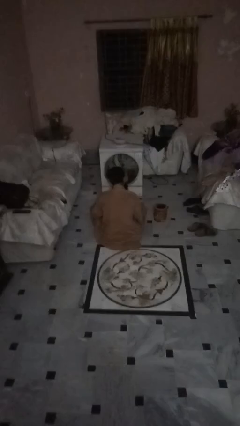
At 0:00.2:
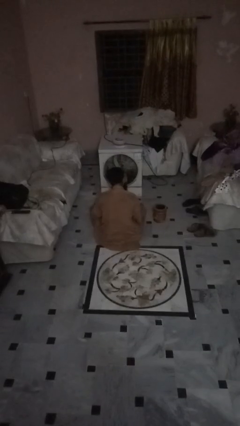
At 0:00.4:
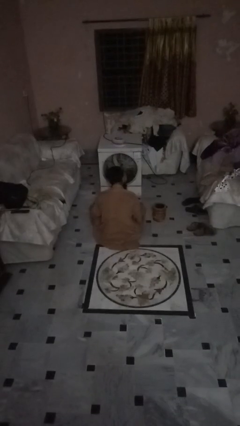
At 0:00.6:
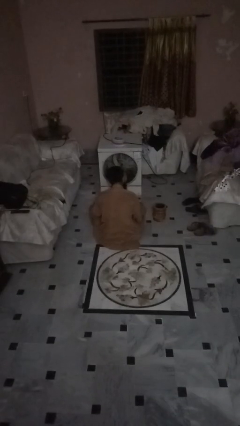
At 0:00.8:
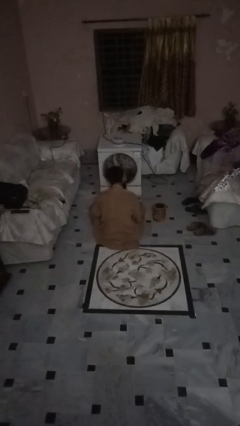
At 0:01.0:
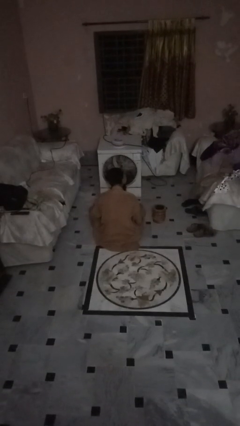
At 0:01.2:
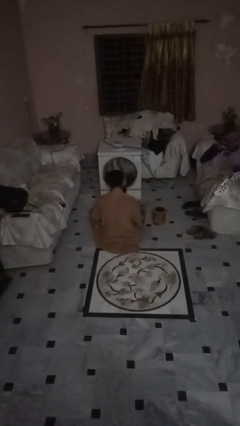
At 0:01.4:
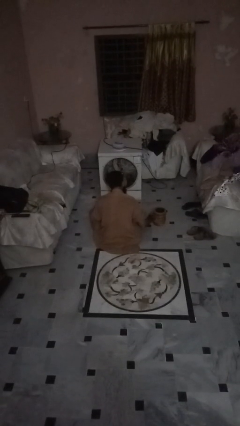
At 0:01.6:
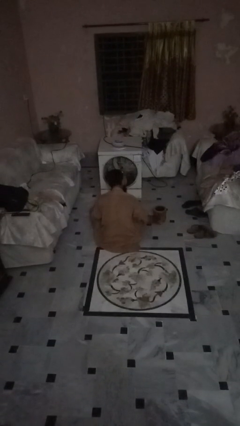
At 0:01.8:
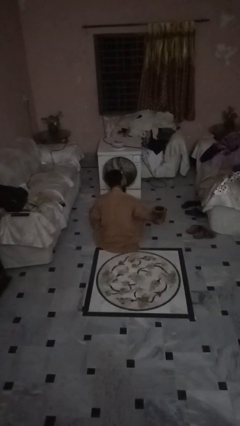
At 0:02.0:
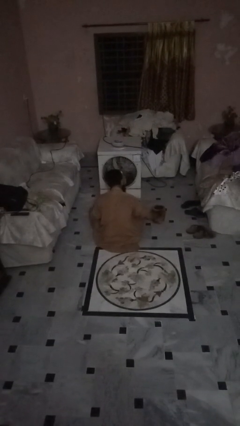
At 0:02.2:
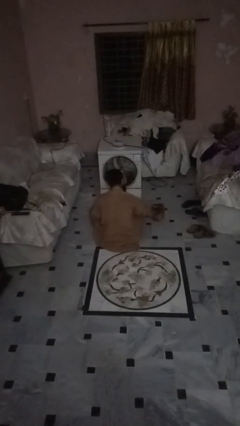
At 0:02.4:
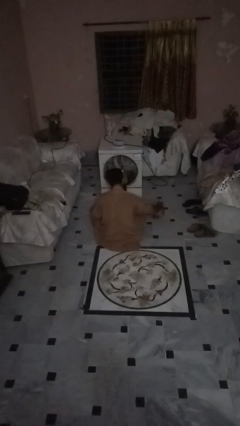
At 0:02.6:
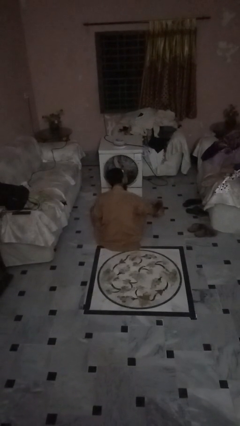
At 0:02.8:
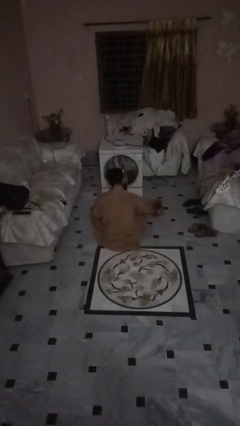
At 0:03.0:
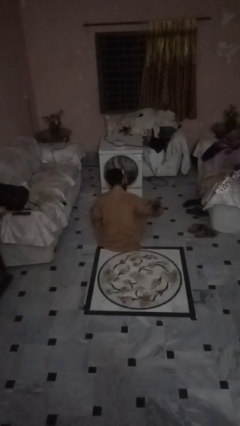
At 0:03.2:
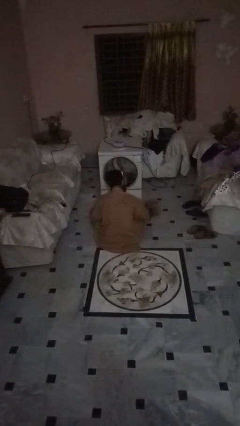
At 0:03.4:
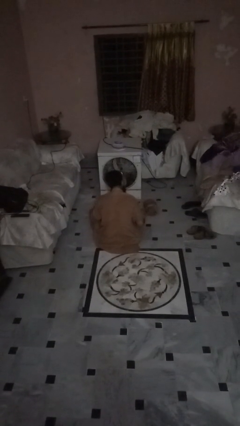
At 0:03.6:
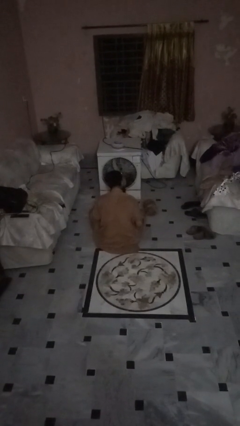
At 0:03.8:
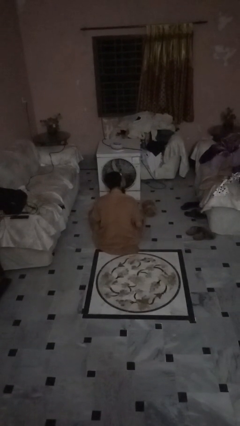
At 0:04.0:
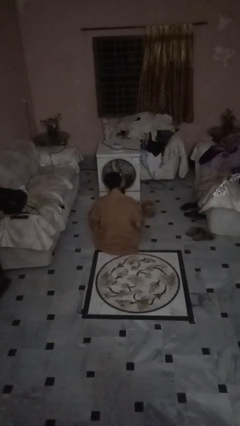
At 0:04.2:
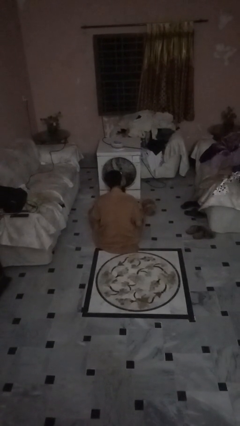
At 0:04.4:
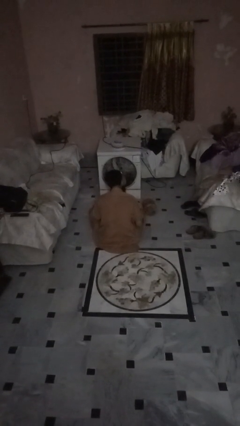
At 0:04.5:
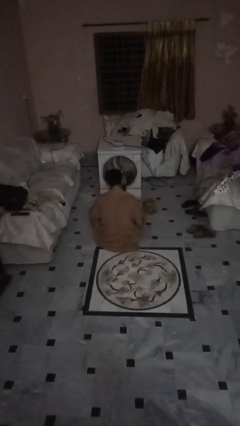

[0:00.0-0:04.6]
person knocks over furniture

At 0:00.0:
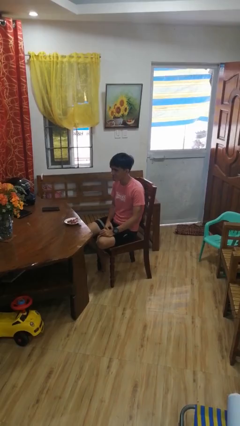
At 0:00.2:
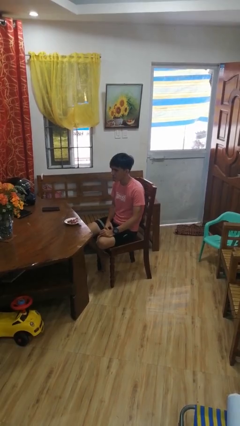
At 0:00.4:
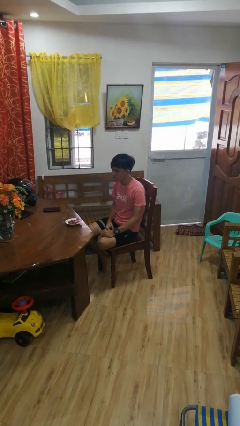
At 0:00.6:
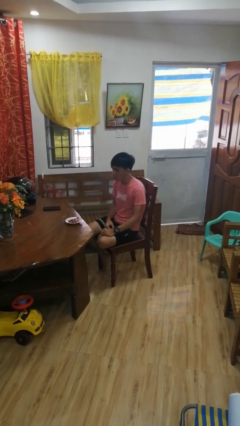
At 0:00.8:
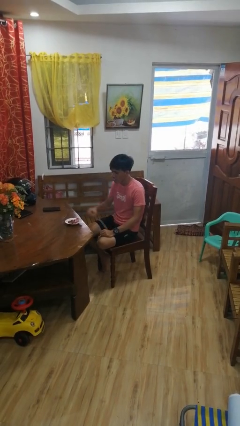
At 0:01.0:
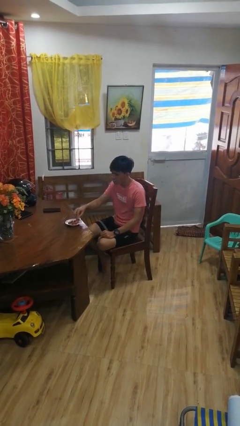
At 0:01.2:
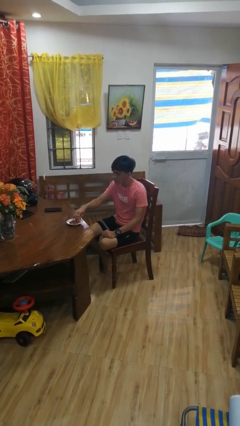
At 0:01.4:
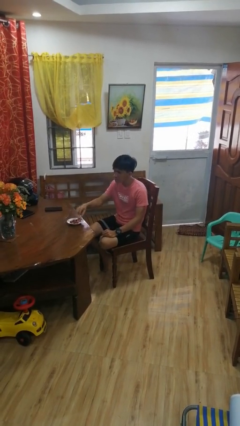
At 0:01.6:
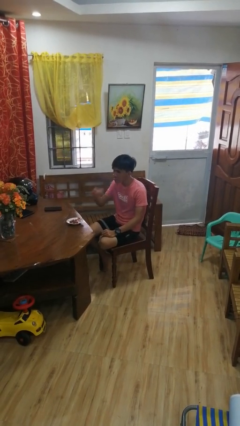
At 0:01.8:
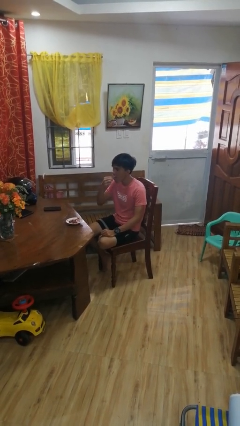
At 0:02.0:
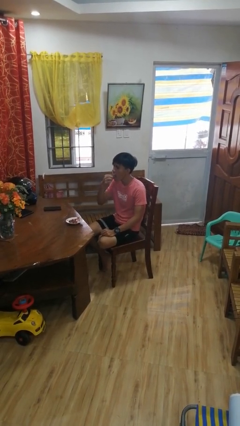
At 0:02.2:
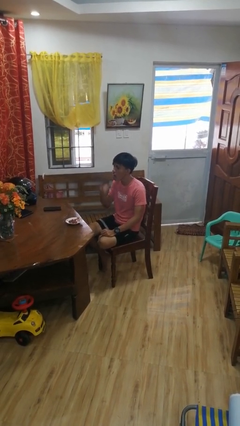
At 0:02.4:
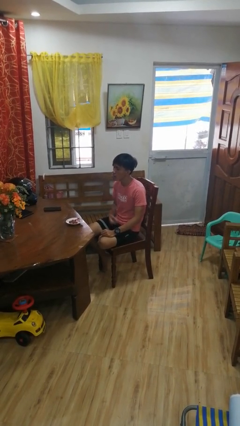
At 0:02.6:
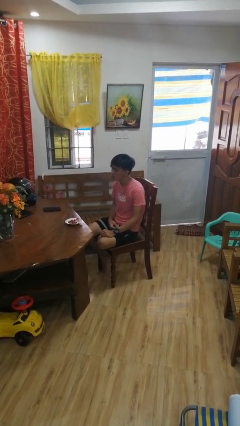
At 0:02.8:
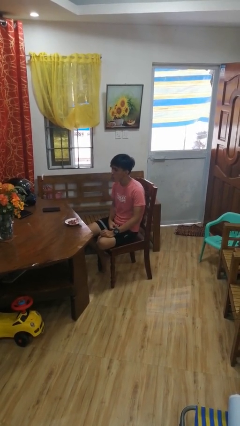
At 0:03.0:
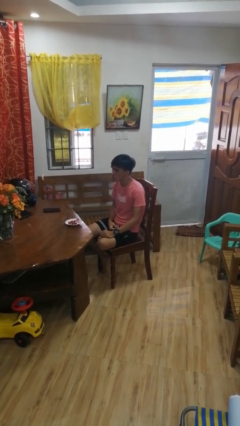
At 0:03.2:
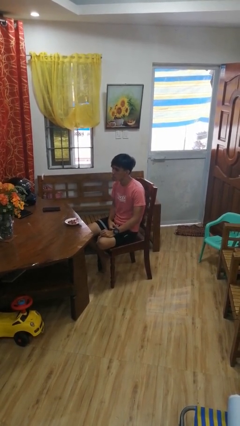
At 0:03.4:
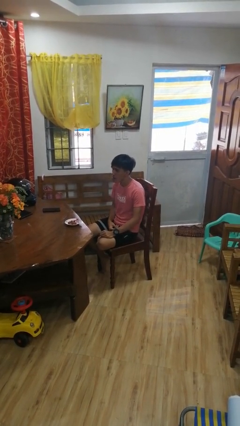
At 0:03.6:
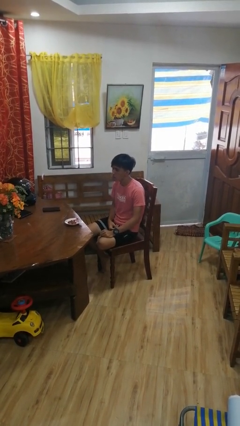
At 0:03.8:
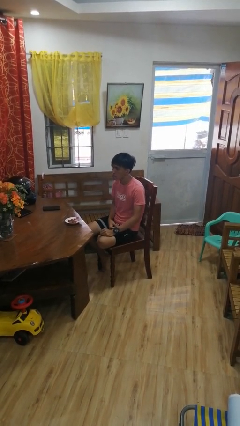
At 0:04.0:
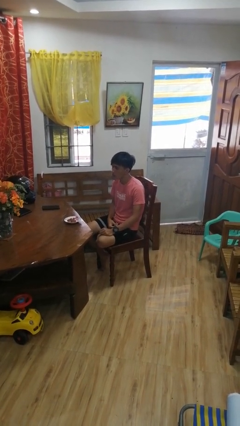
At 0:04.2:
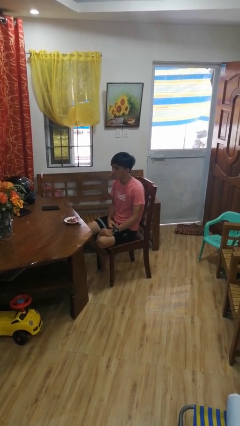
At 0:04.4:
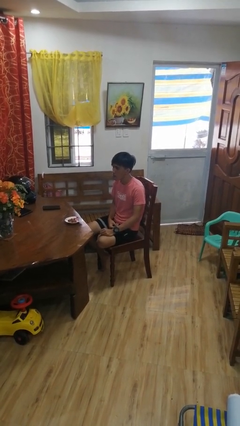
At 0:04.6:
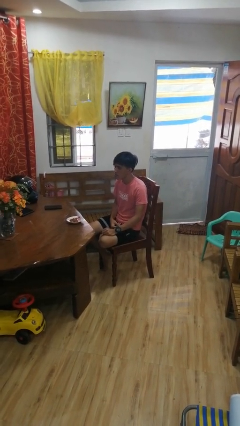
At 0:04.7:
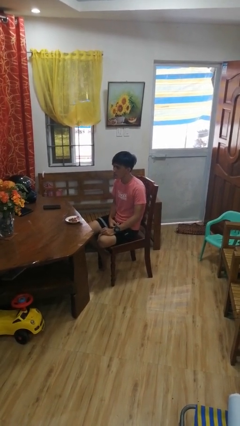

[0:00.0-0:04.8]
person eats with hands

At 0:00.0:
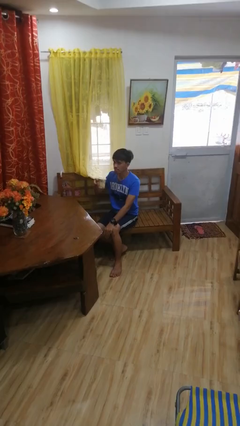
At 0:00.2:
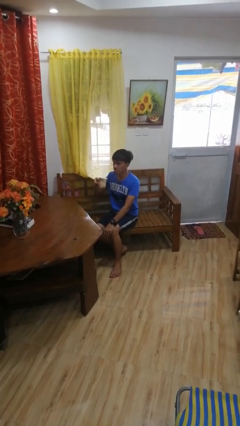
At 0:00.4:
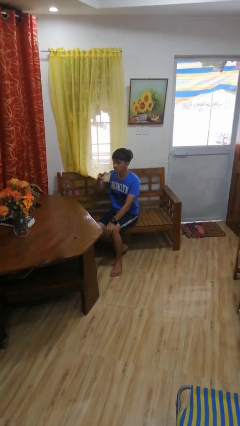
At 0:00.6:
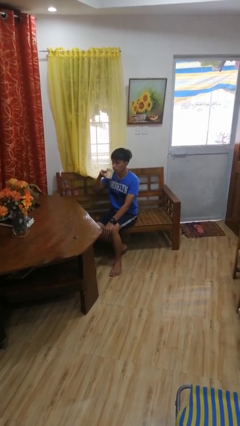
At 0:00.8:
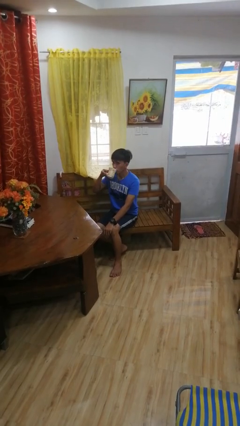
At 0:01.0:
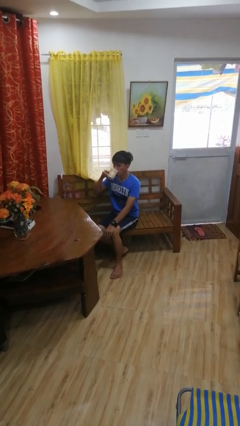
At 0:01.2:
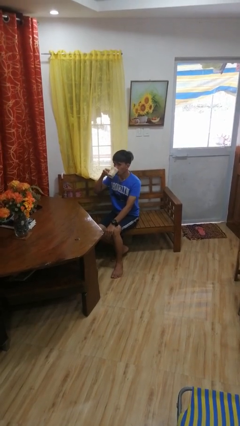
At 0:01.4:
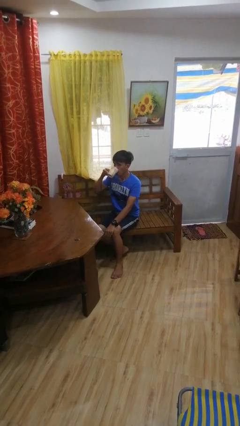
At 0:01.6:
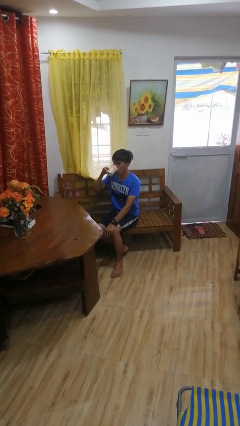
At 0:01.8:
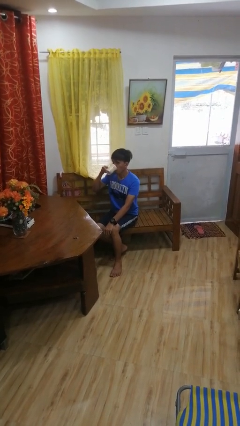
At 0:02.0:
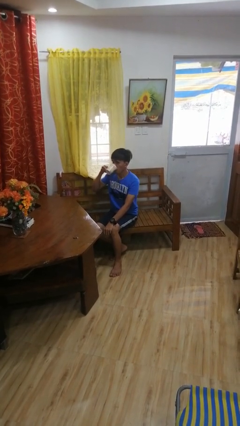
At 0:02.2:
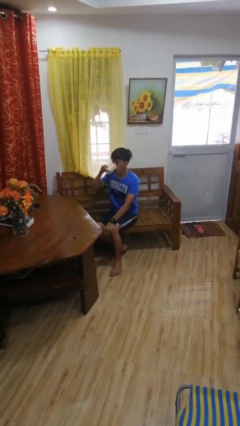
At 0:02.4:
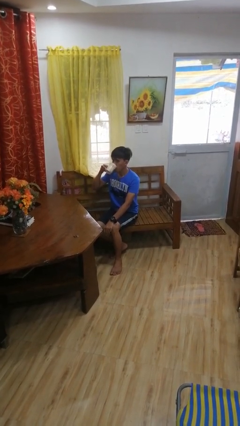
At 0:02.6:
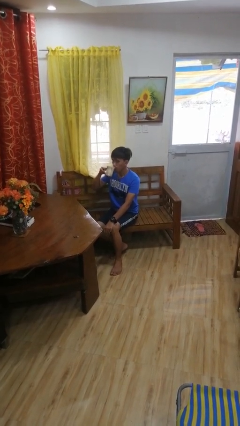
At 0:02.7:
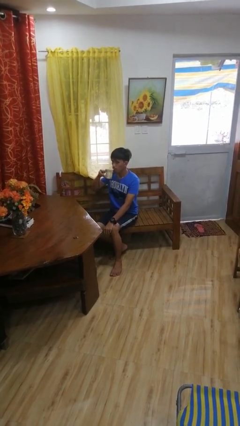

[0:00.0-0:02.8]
person drinks from mug

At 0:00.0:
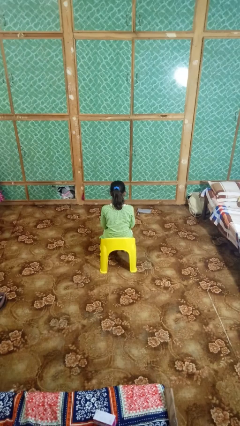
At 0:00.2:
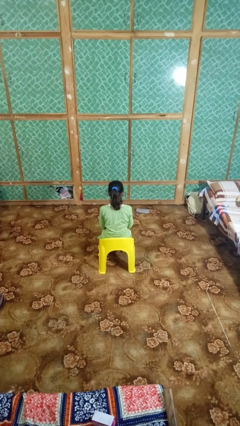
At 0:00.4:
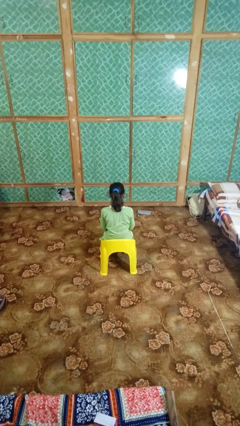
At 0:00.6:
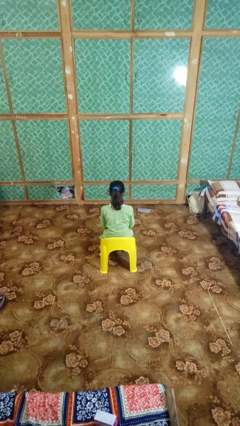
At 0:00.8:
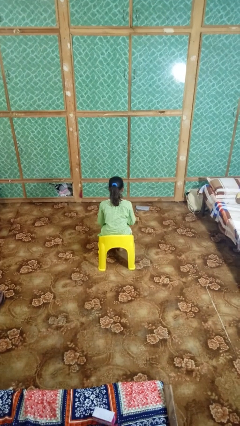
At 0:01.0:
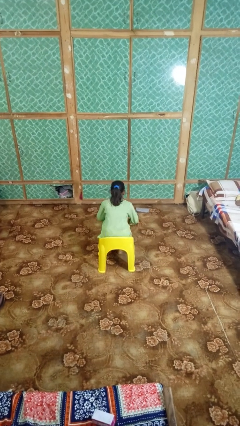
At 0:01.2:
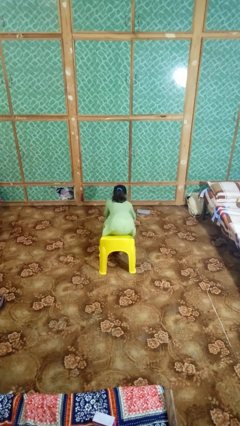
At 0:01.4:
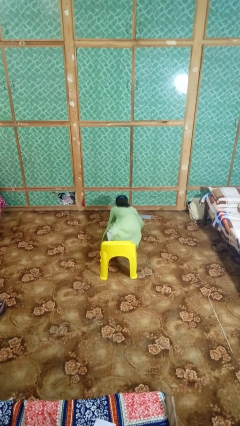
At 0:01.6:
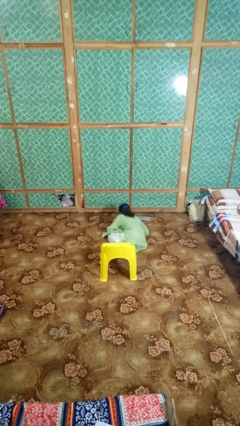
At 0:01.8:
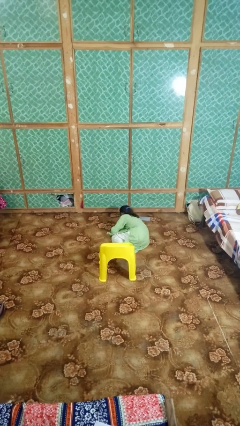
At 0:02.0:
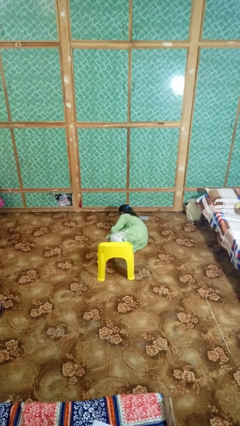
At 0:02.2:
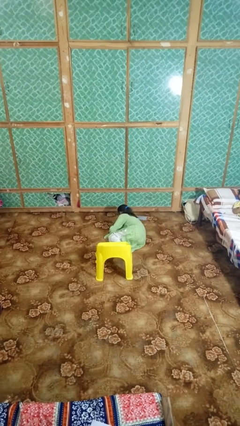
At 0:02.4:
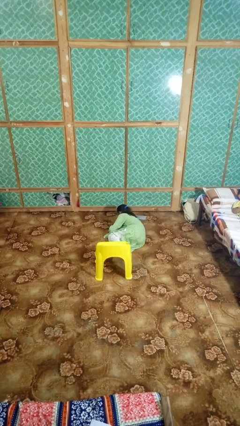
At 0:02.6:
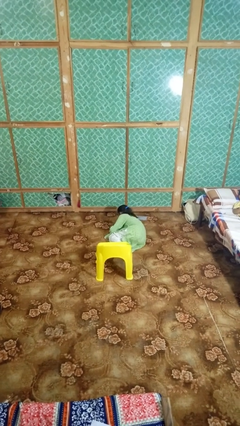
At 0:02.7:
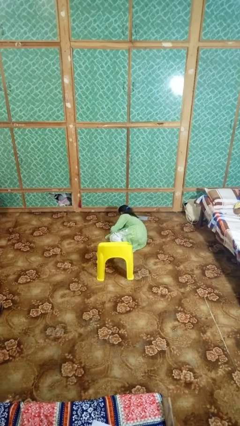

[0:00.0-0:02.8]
person falls from chair

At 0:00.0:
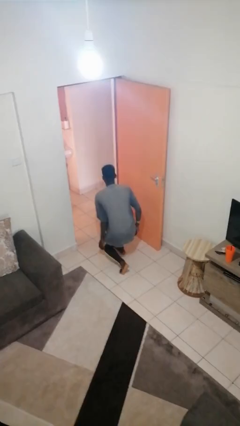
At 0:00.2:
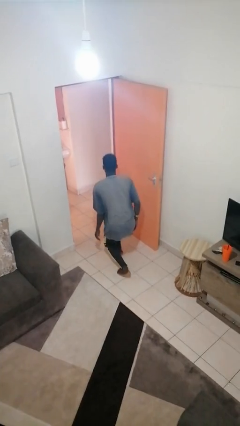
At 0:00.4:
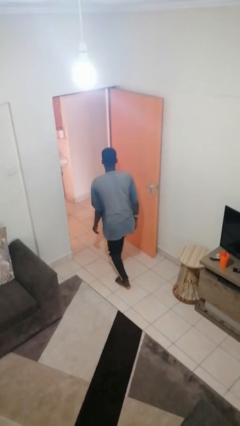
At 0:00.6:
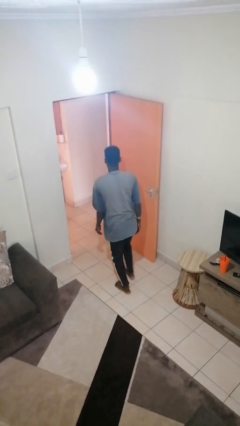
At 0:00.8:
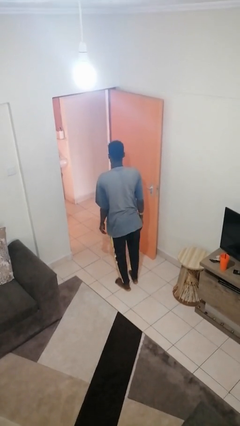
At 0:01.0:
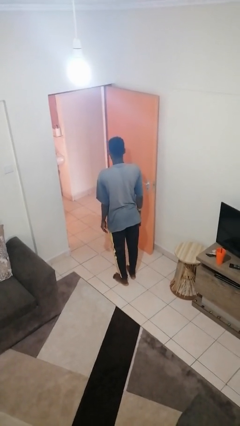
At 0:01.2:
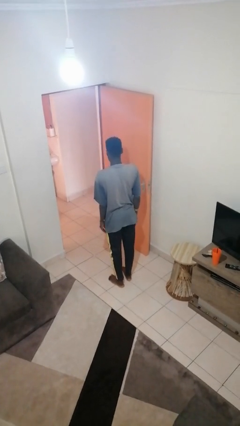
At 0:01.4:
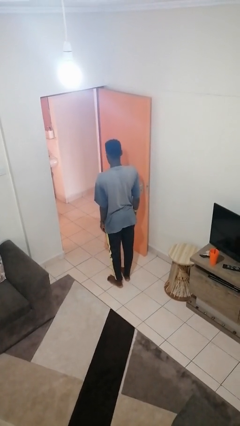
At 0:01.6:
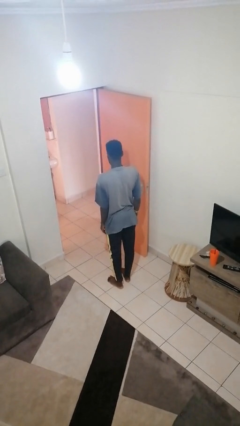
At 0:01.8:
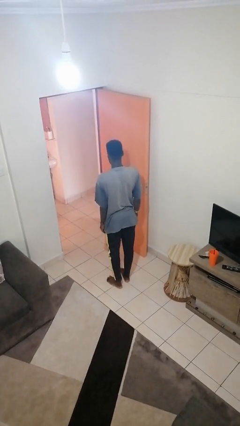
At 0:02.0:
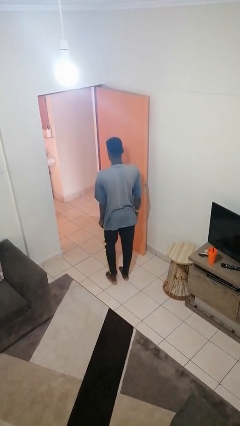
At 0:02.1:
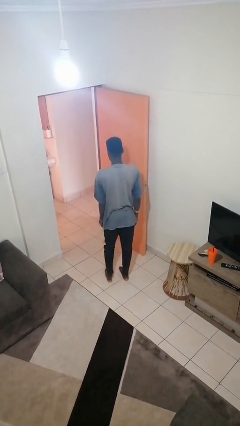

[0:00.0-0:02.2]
person stands up from floor
